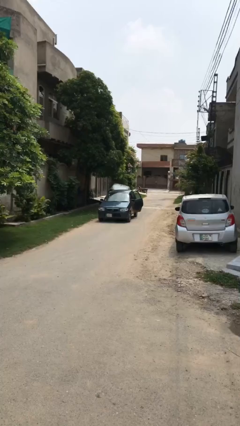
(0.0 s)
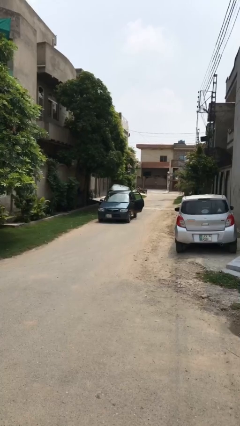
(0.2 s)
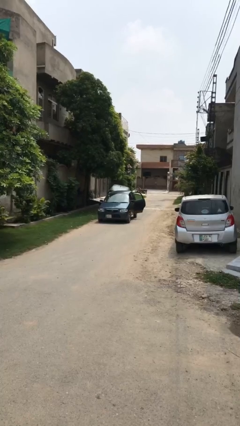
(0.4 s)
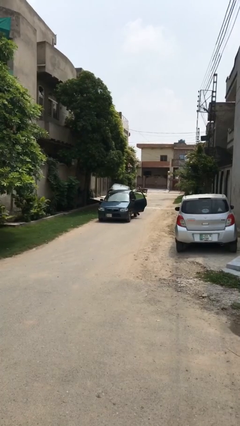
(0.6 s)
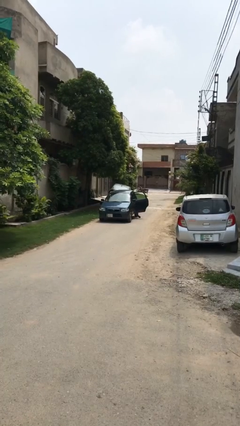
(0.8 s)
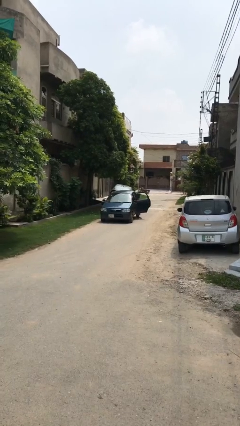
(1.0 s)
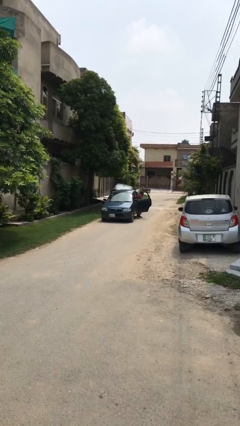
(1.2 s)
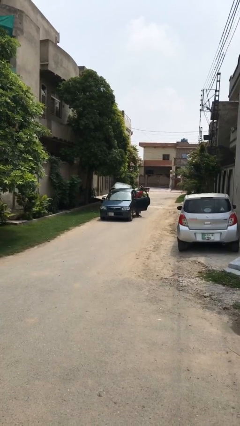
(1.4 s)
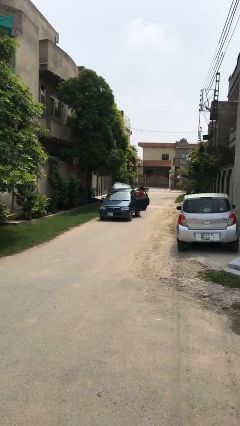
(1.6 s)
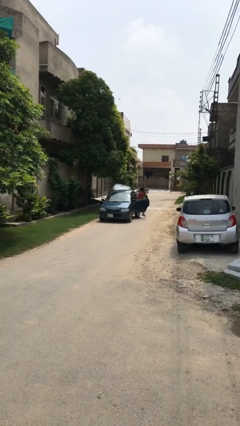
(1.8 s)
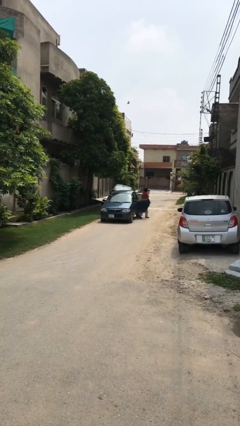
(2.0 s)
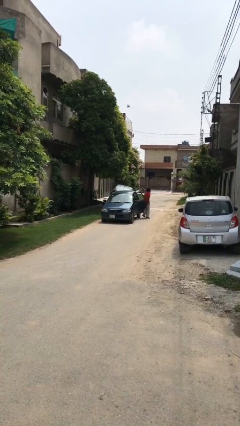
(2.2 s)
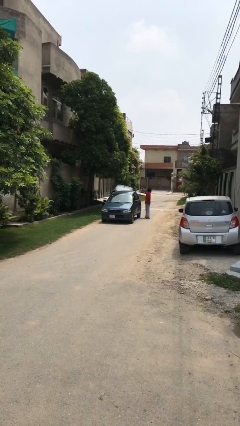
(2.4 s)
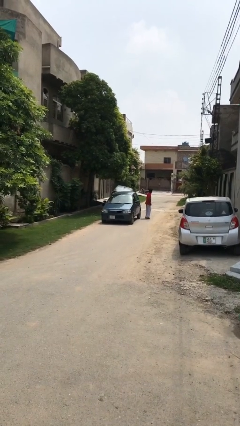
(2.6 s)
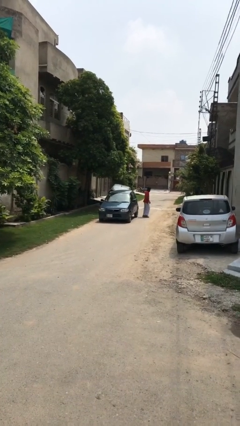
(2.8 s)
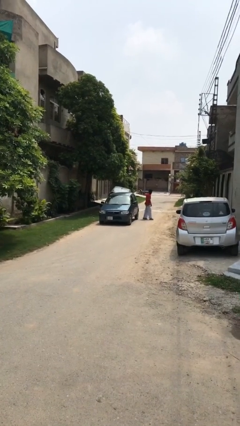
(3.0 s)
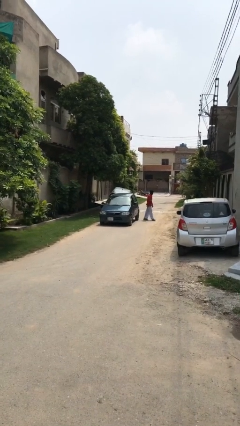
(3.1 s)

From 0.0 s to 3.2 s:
car drops off person

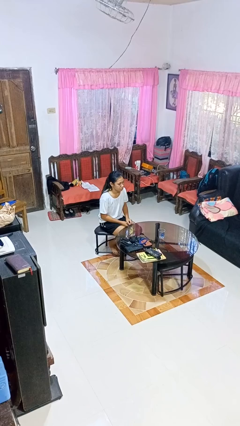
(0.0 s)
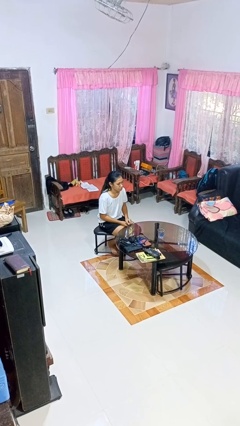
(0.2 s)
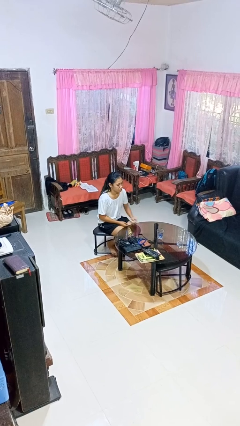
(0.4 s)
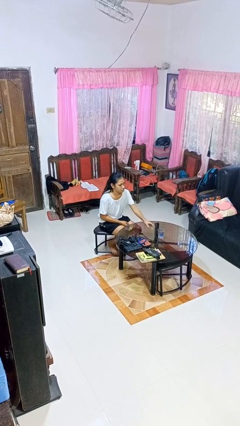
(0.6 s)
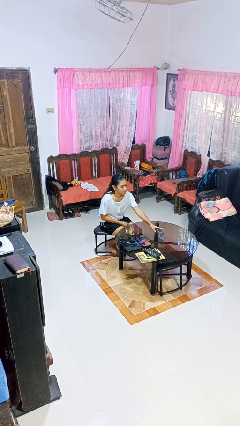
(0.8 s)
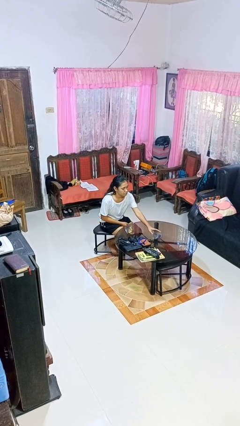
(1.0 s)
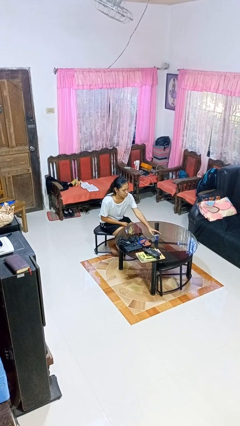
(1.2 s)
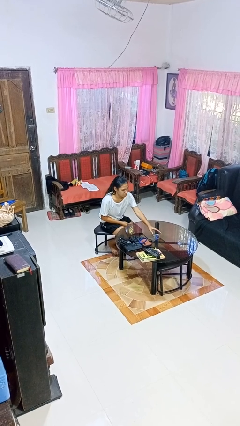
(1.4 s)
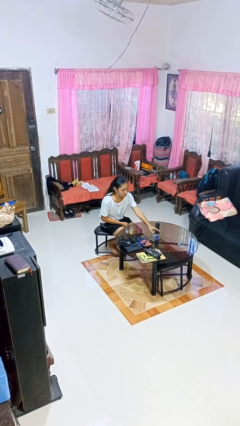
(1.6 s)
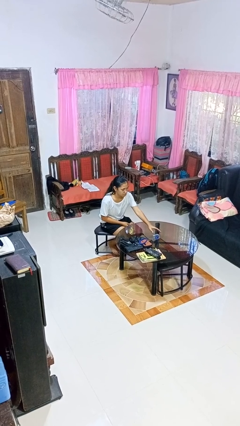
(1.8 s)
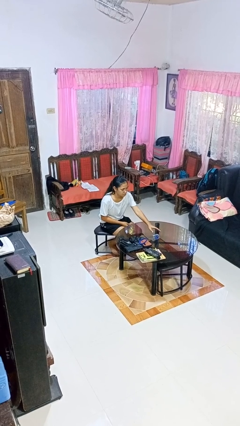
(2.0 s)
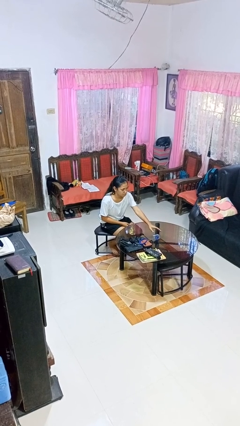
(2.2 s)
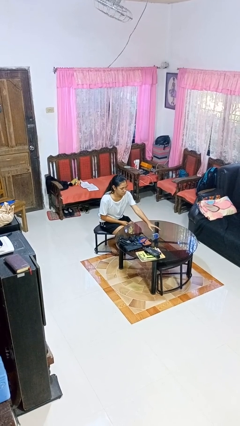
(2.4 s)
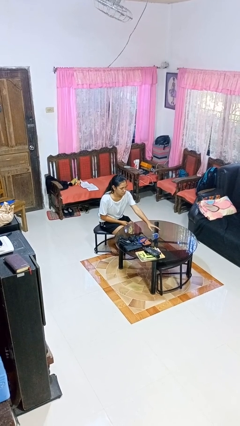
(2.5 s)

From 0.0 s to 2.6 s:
person knocks over glass

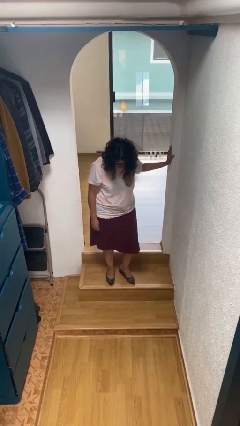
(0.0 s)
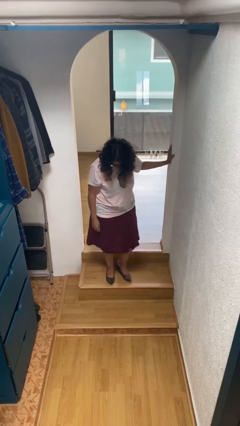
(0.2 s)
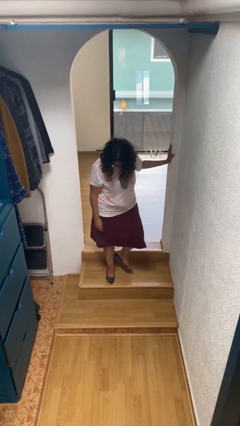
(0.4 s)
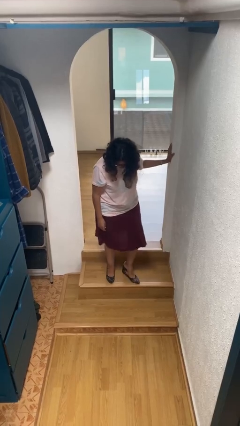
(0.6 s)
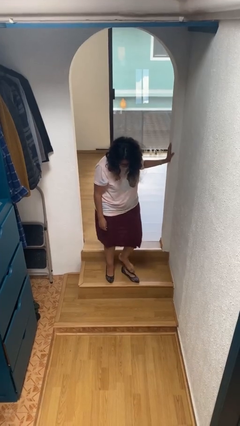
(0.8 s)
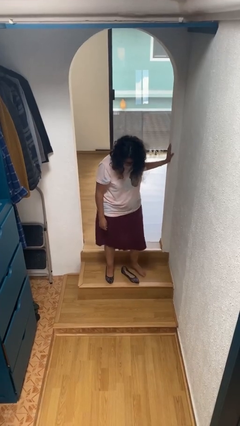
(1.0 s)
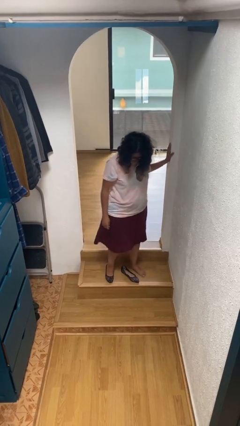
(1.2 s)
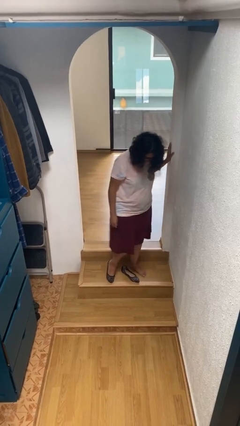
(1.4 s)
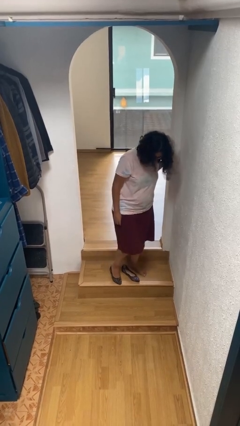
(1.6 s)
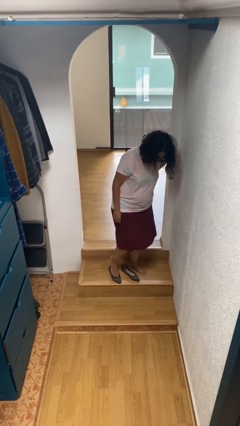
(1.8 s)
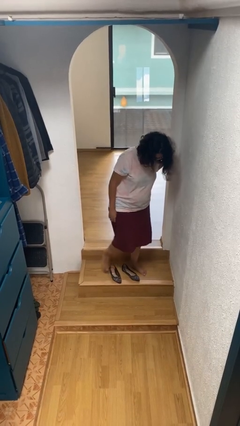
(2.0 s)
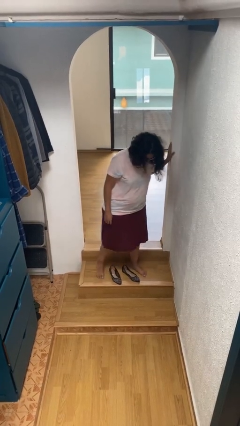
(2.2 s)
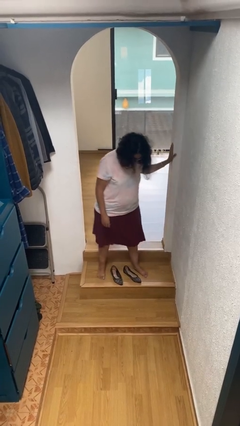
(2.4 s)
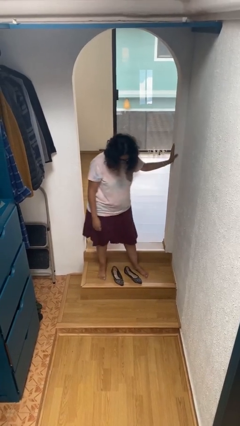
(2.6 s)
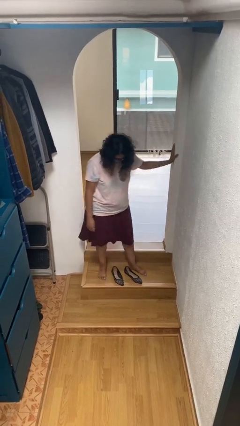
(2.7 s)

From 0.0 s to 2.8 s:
person takes off shoes

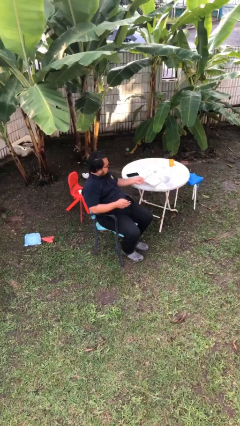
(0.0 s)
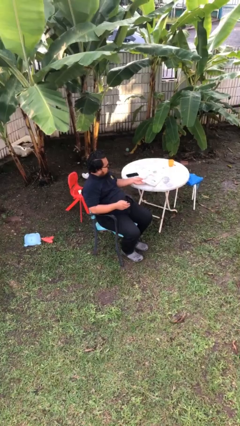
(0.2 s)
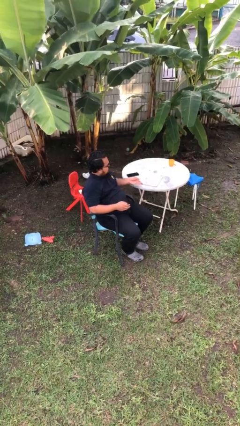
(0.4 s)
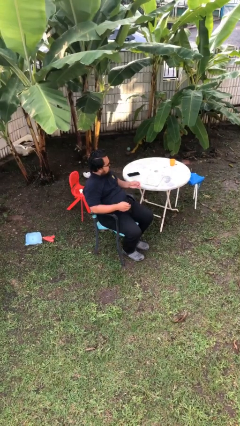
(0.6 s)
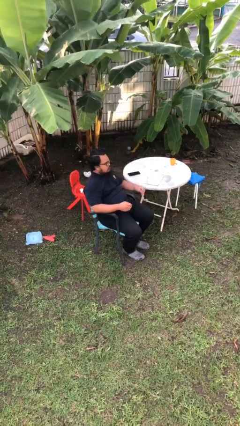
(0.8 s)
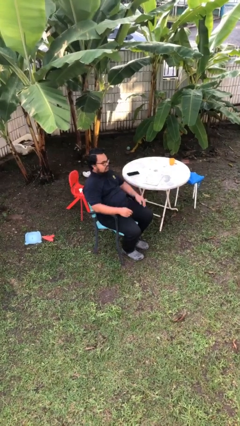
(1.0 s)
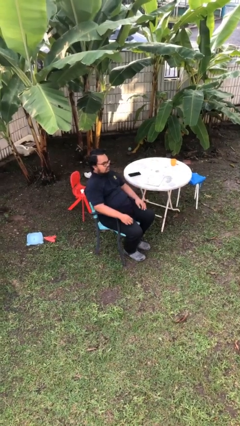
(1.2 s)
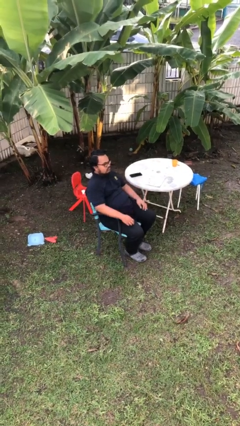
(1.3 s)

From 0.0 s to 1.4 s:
person puts down object on table

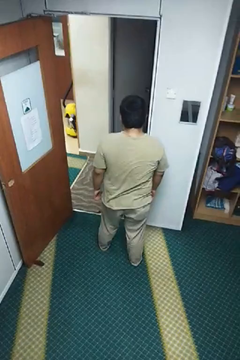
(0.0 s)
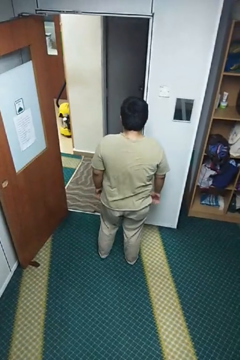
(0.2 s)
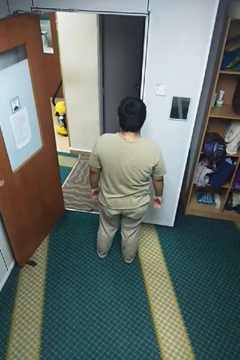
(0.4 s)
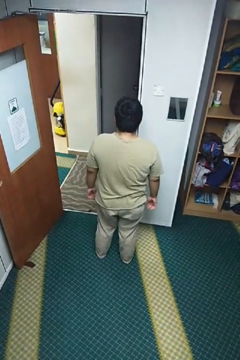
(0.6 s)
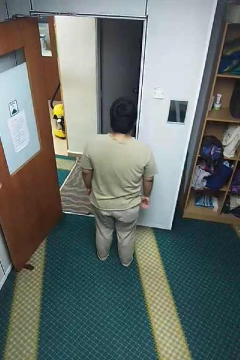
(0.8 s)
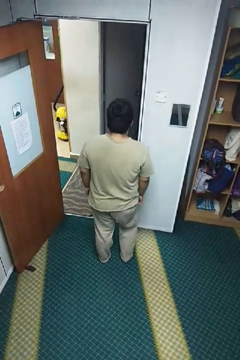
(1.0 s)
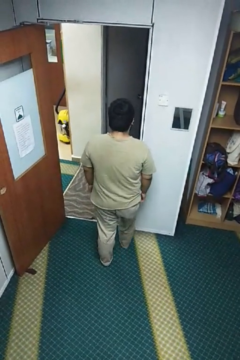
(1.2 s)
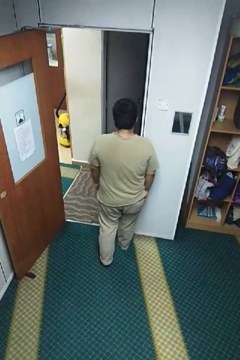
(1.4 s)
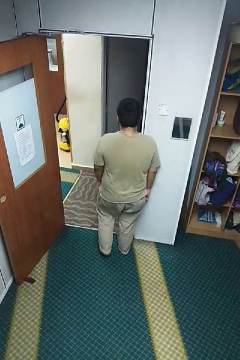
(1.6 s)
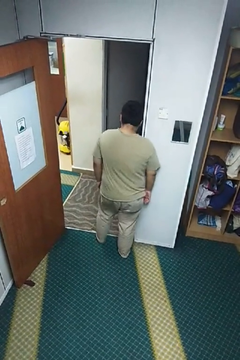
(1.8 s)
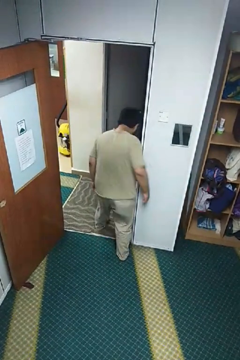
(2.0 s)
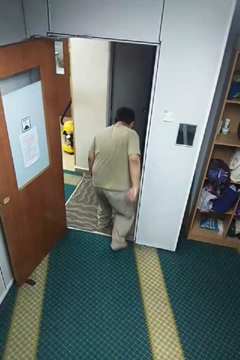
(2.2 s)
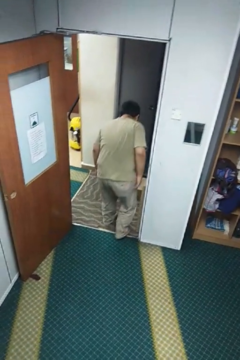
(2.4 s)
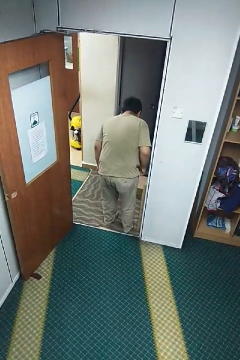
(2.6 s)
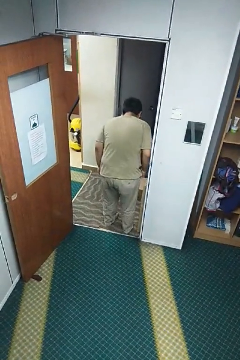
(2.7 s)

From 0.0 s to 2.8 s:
person bumps into wall

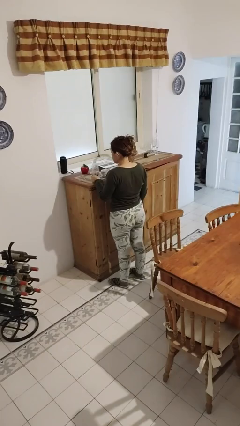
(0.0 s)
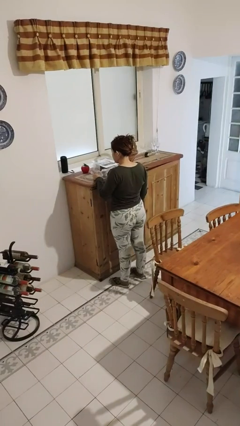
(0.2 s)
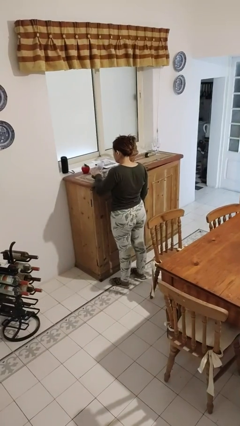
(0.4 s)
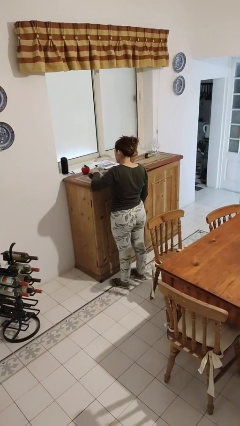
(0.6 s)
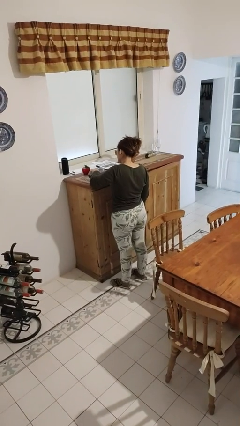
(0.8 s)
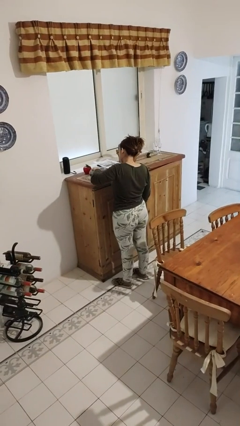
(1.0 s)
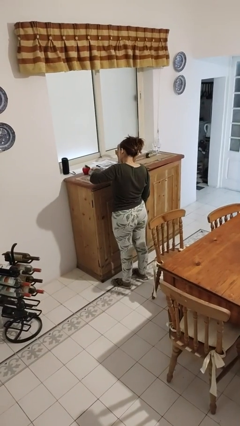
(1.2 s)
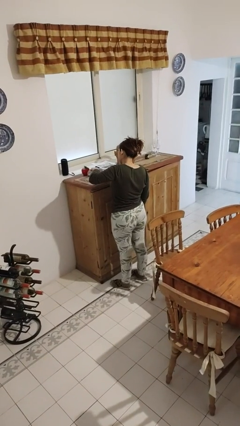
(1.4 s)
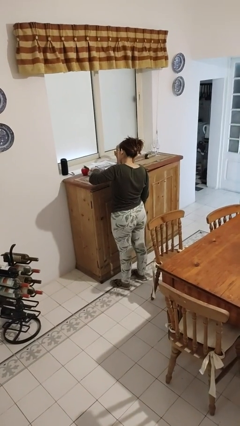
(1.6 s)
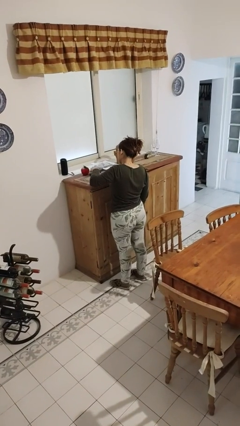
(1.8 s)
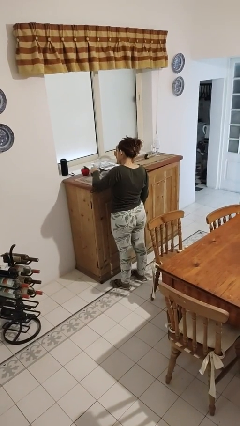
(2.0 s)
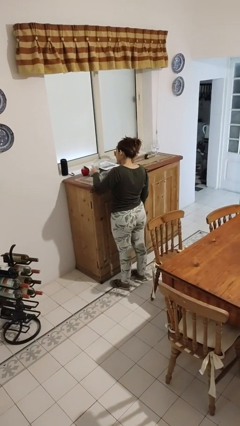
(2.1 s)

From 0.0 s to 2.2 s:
person pours liquid into cup

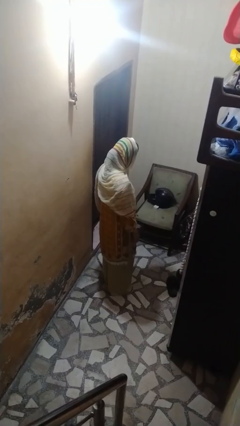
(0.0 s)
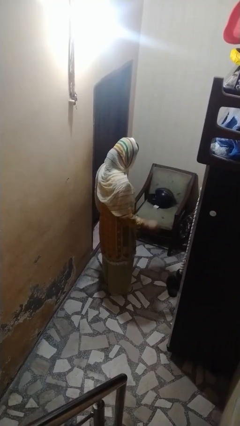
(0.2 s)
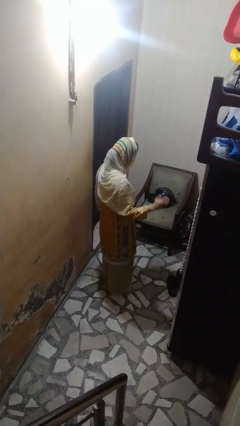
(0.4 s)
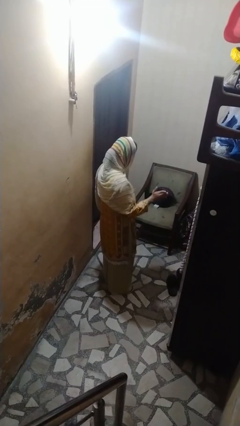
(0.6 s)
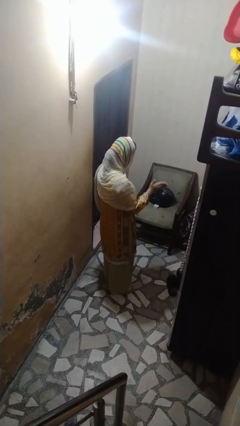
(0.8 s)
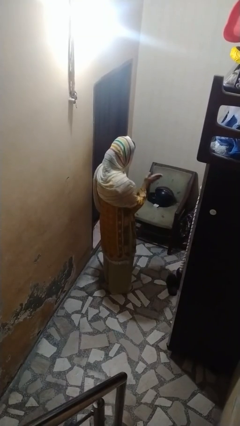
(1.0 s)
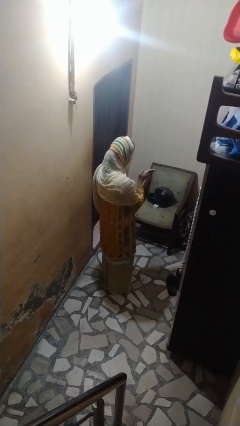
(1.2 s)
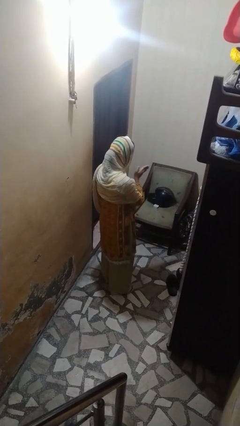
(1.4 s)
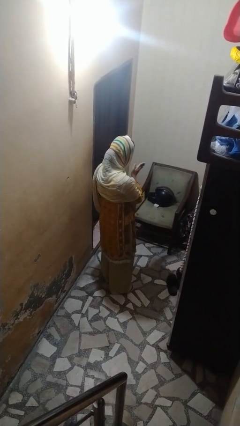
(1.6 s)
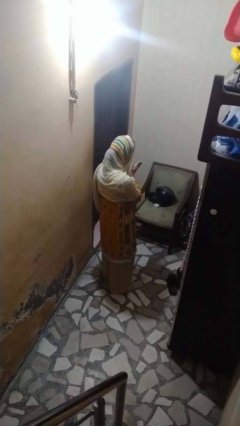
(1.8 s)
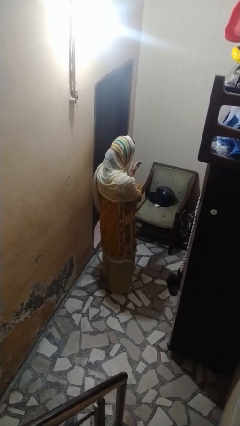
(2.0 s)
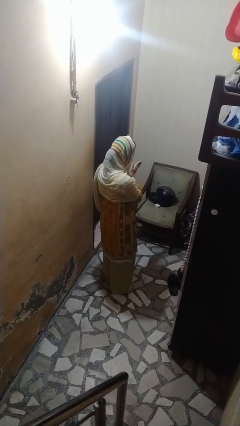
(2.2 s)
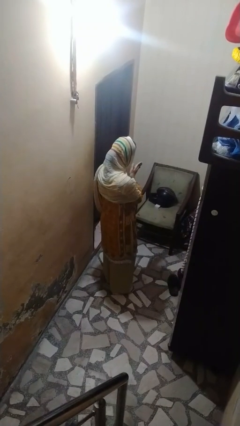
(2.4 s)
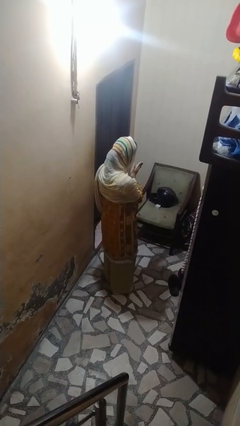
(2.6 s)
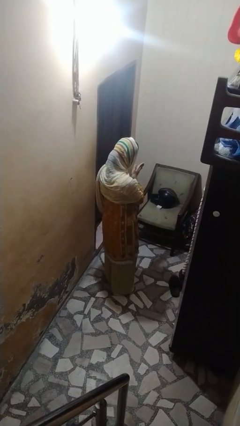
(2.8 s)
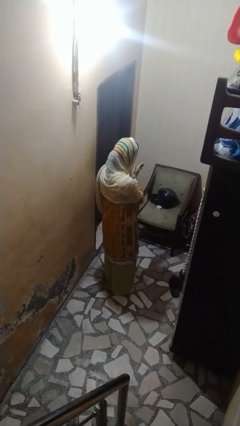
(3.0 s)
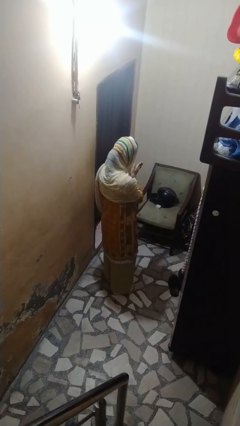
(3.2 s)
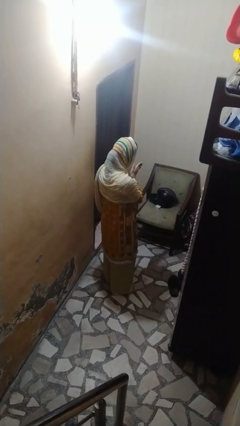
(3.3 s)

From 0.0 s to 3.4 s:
person gestures swipe left
